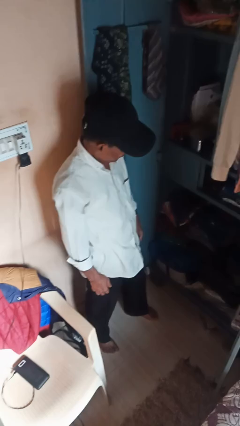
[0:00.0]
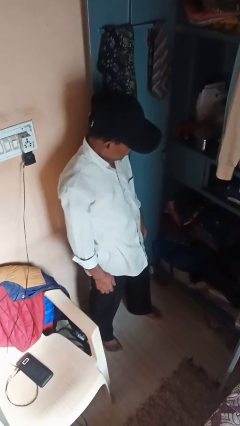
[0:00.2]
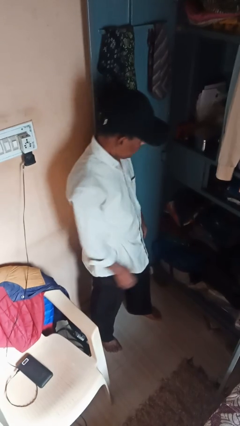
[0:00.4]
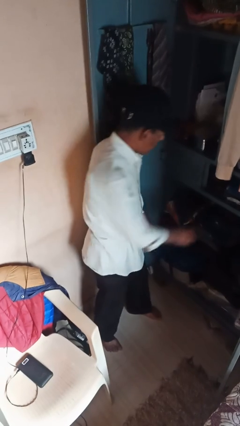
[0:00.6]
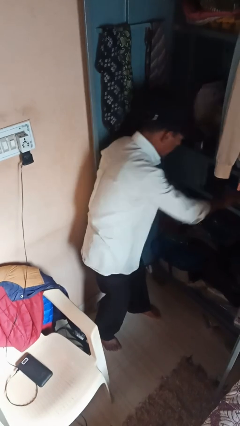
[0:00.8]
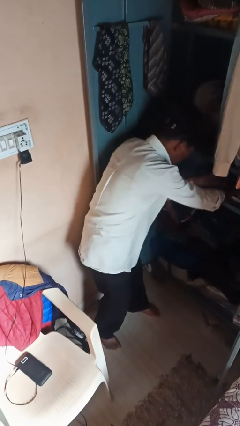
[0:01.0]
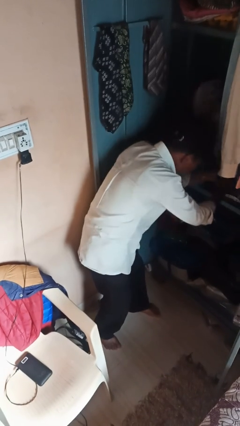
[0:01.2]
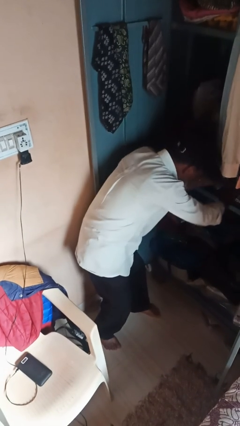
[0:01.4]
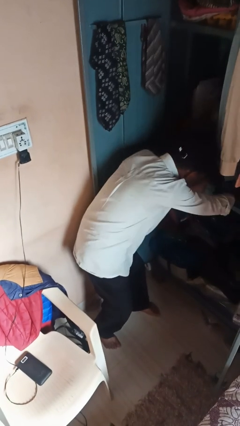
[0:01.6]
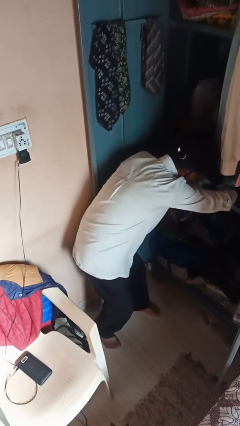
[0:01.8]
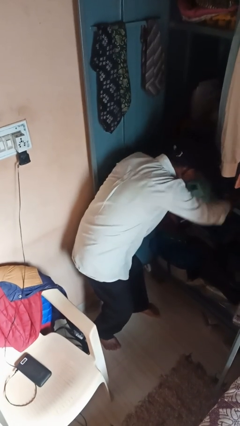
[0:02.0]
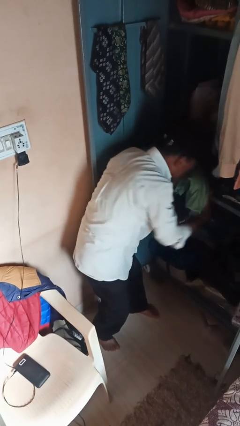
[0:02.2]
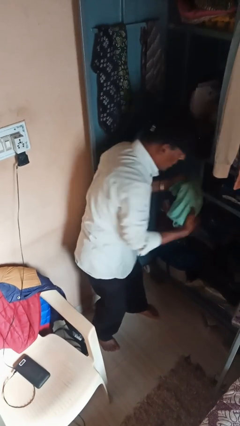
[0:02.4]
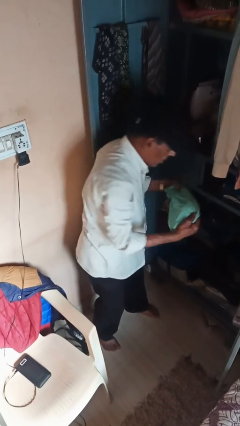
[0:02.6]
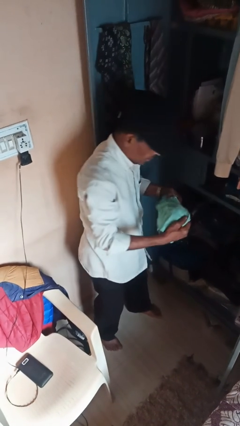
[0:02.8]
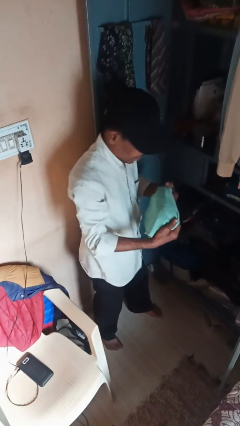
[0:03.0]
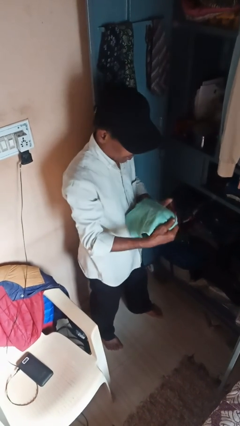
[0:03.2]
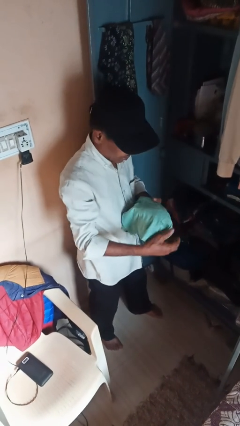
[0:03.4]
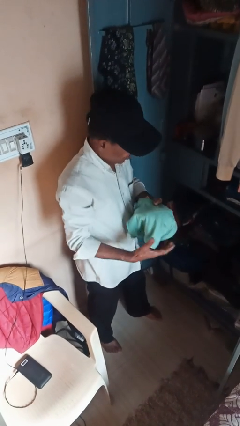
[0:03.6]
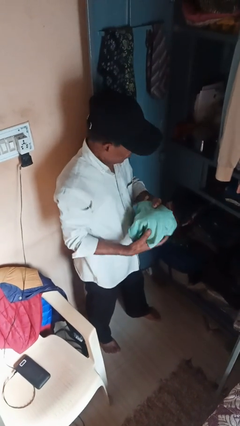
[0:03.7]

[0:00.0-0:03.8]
person takes clothes from dresser

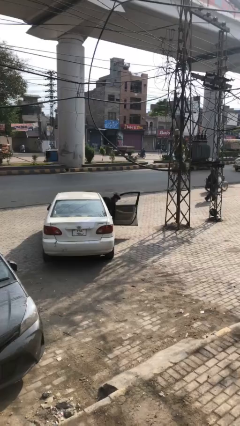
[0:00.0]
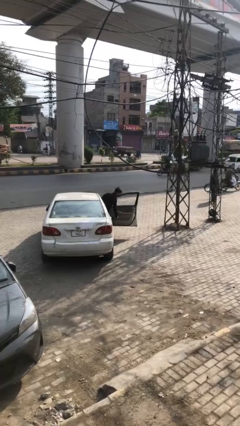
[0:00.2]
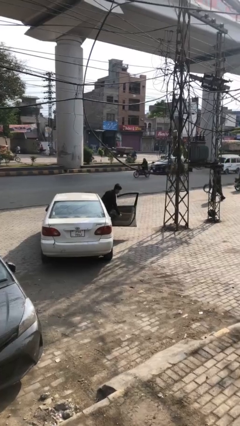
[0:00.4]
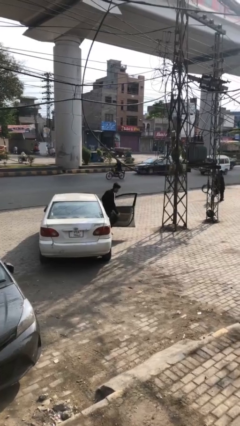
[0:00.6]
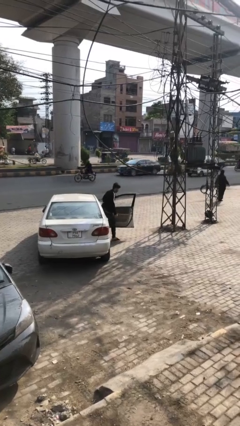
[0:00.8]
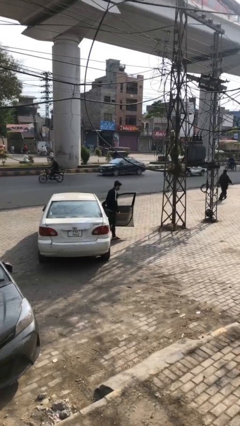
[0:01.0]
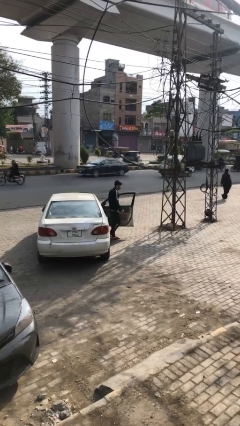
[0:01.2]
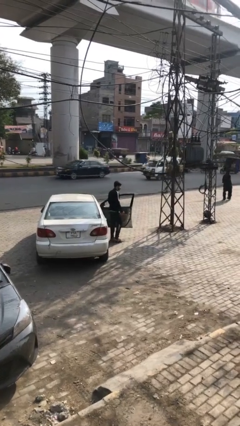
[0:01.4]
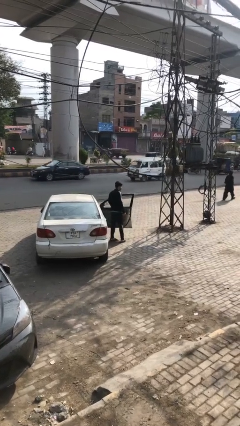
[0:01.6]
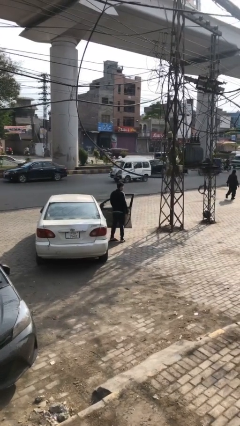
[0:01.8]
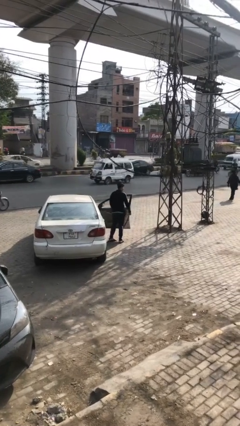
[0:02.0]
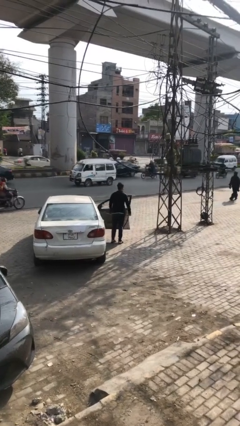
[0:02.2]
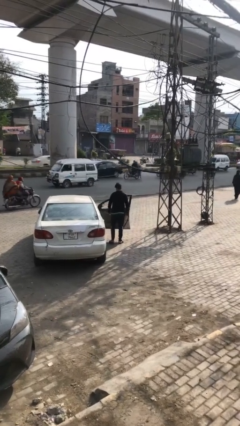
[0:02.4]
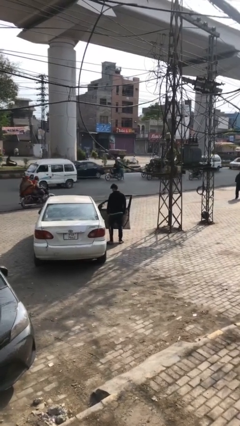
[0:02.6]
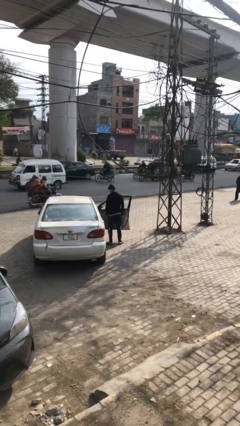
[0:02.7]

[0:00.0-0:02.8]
person exits car

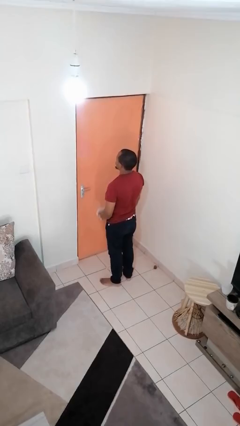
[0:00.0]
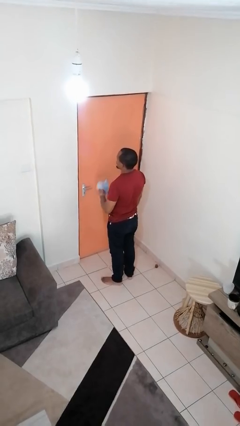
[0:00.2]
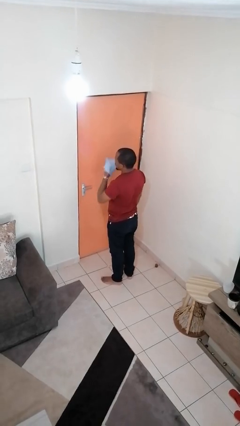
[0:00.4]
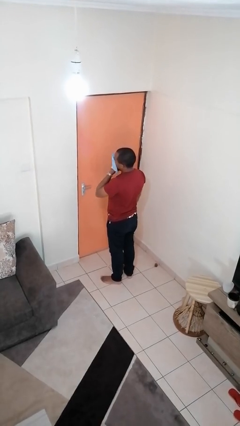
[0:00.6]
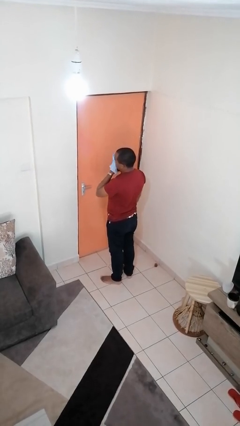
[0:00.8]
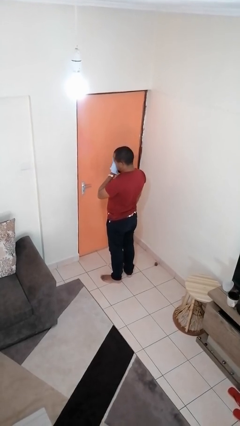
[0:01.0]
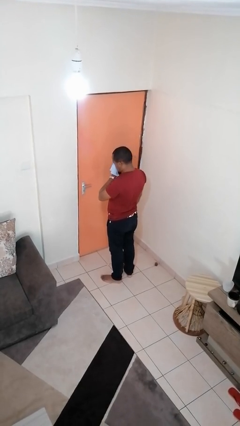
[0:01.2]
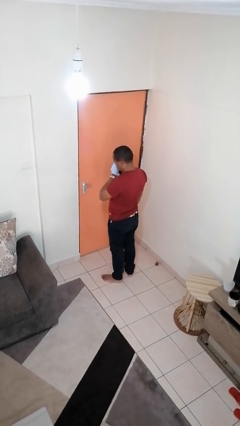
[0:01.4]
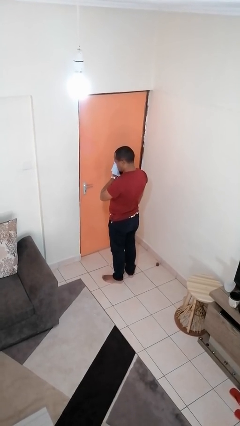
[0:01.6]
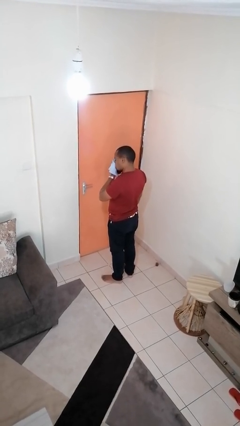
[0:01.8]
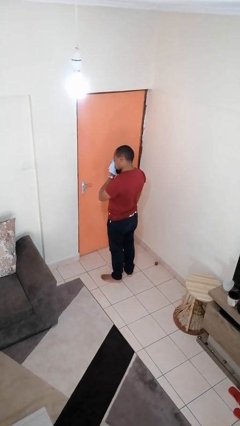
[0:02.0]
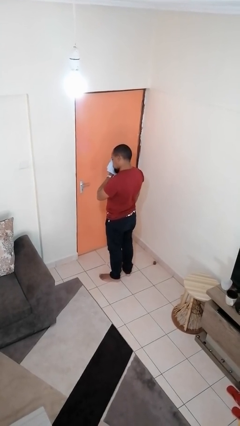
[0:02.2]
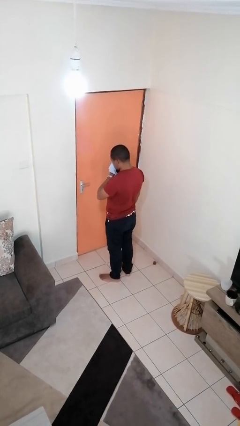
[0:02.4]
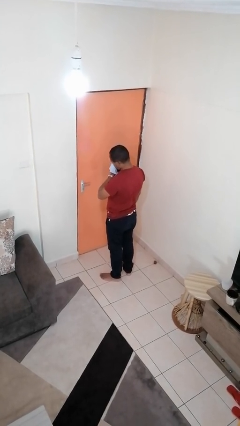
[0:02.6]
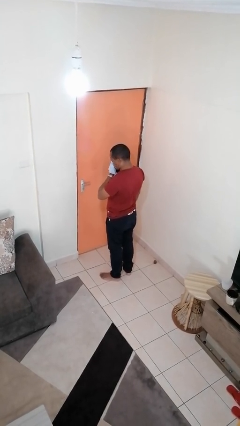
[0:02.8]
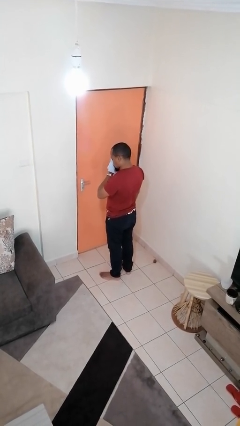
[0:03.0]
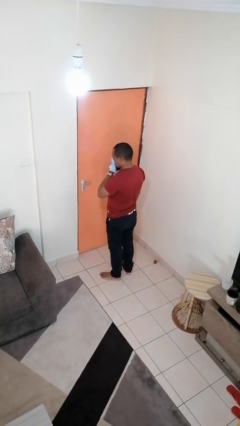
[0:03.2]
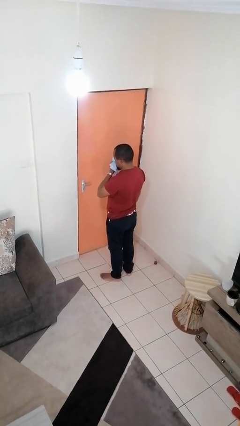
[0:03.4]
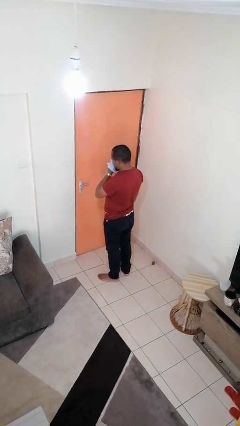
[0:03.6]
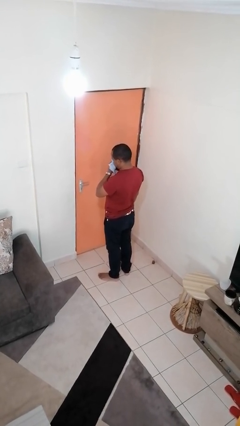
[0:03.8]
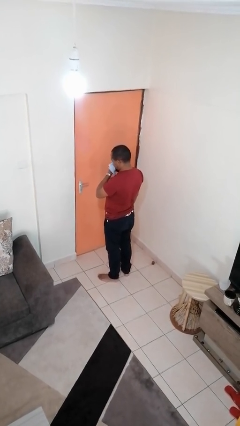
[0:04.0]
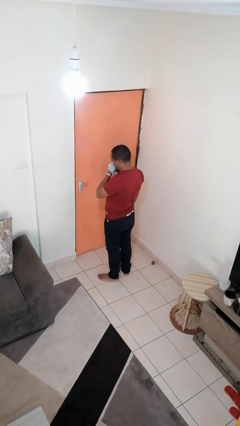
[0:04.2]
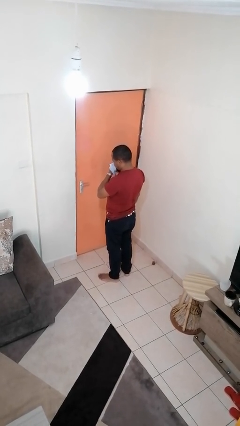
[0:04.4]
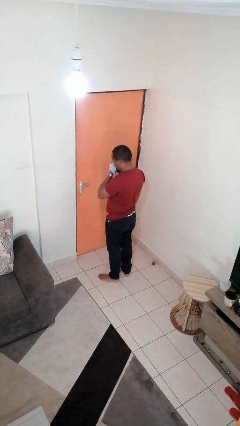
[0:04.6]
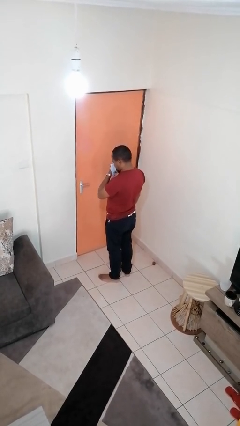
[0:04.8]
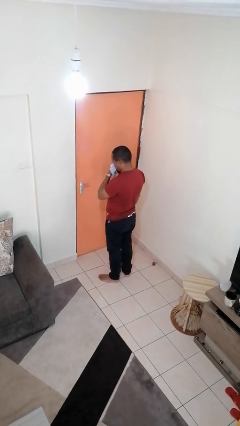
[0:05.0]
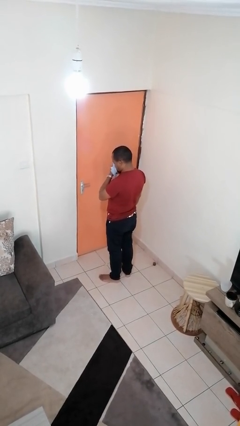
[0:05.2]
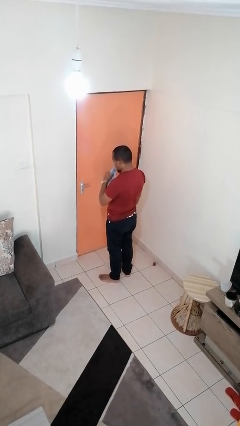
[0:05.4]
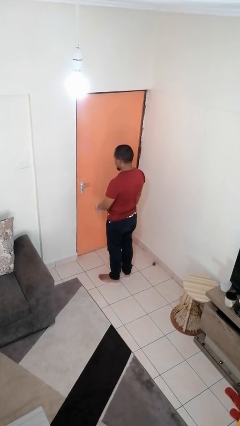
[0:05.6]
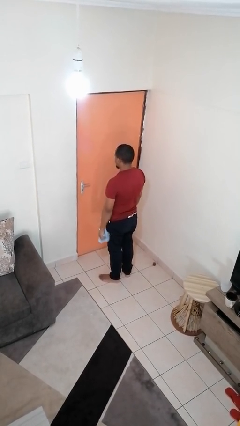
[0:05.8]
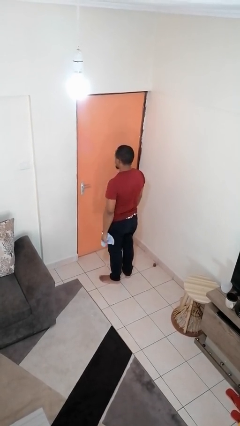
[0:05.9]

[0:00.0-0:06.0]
person blows nose

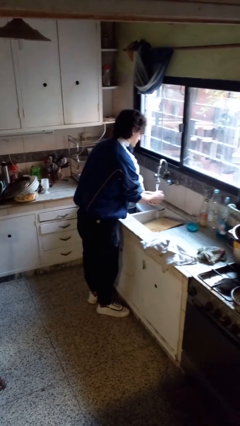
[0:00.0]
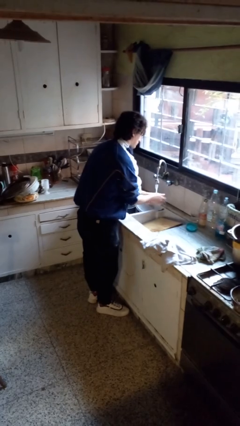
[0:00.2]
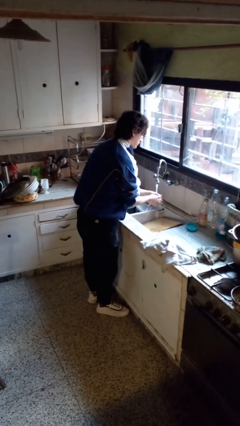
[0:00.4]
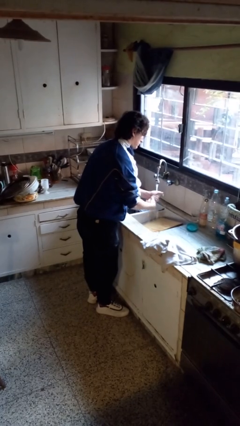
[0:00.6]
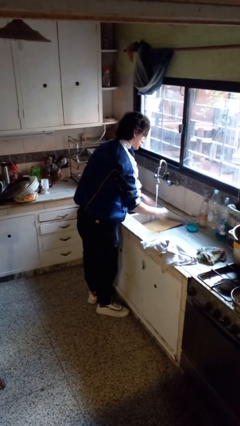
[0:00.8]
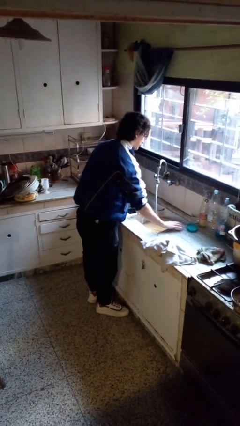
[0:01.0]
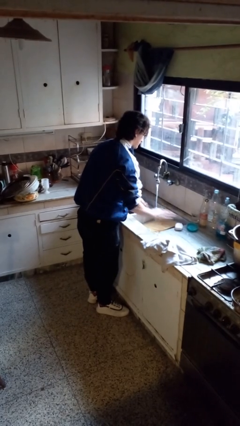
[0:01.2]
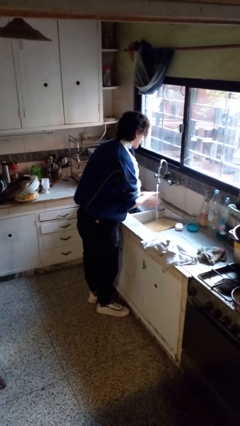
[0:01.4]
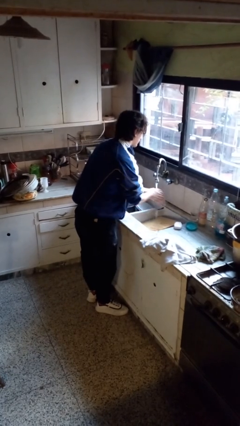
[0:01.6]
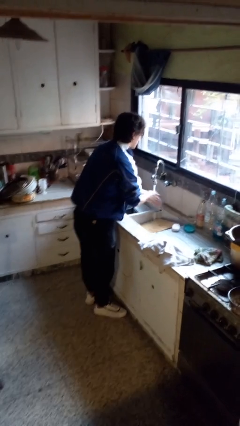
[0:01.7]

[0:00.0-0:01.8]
person washes hands

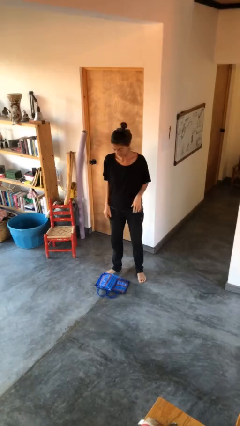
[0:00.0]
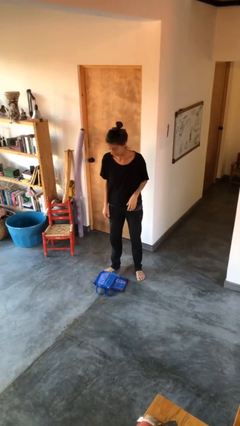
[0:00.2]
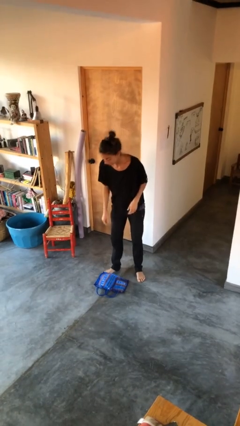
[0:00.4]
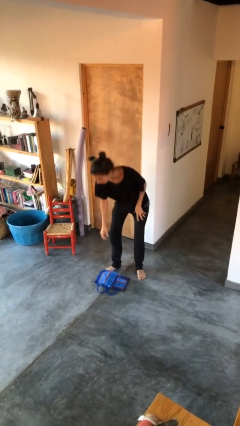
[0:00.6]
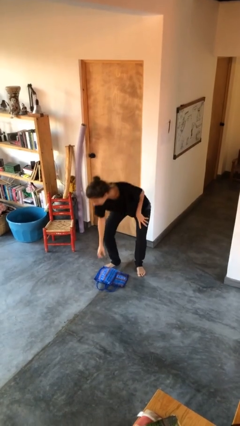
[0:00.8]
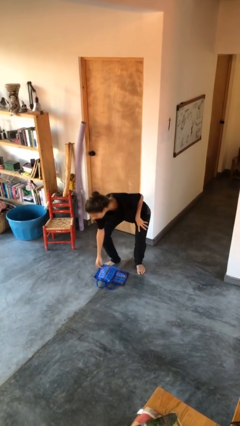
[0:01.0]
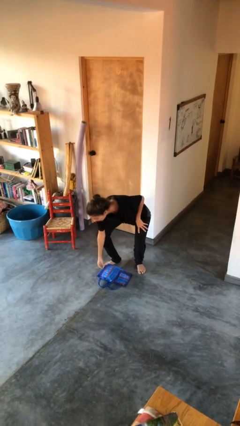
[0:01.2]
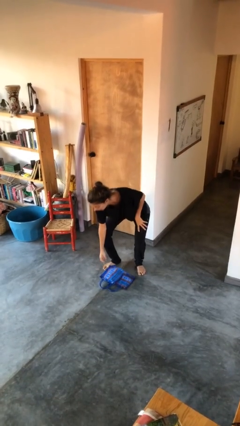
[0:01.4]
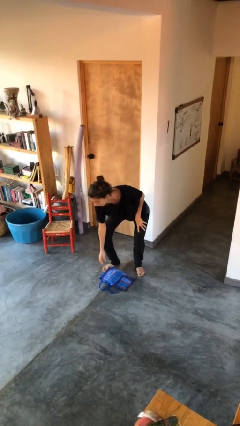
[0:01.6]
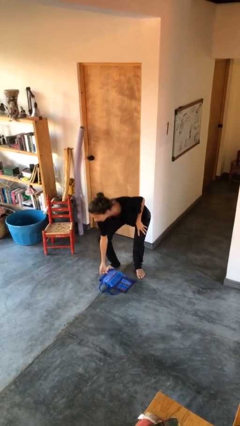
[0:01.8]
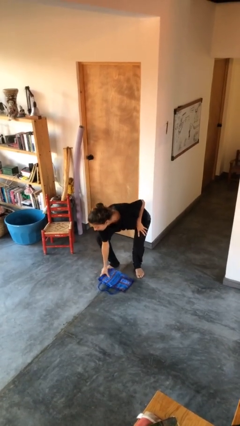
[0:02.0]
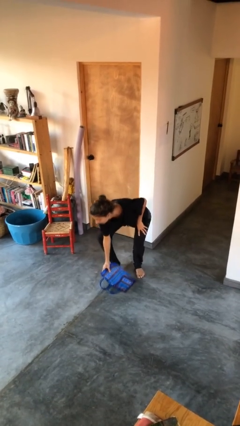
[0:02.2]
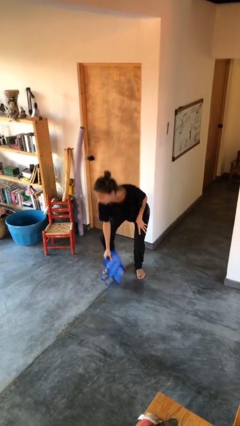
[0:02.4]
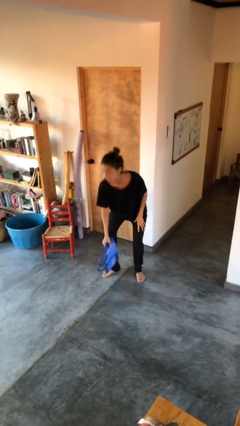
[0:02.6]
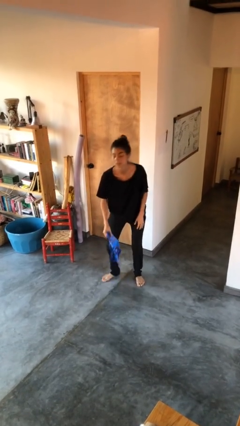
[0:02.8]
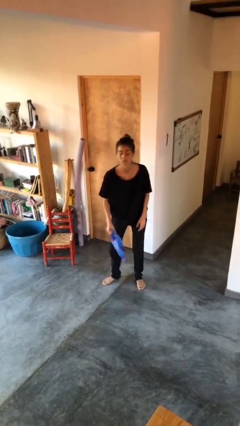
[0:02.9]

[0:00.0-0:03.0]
person picks up object from floor

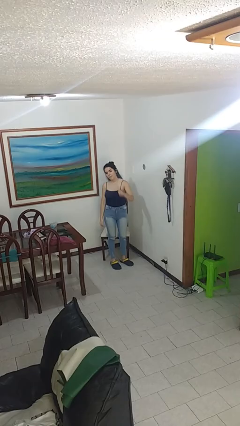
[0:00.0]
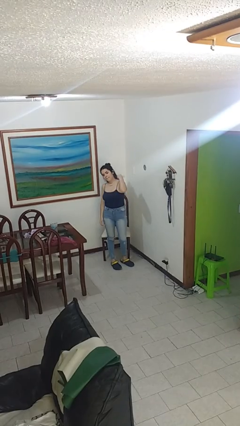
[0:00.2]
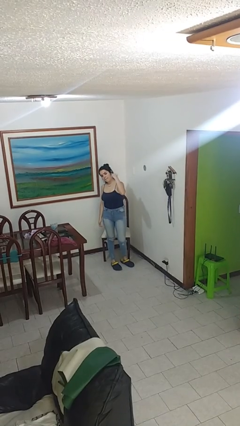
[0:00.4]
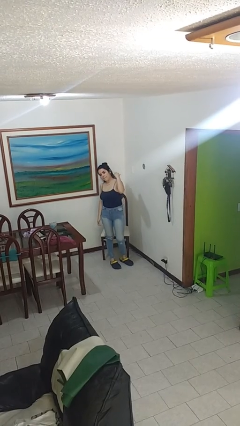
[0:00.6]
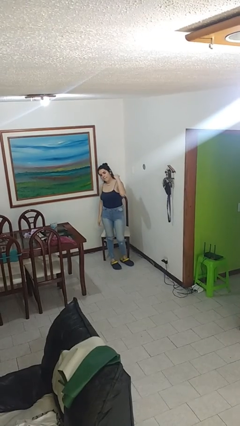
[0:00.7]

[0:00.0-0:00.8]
person gestures behind me
